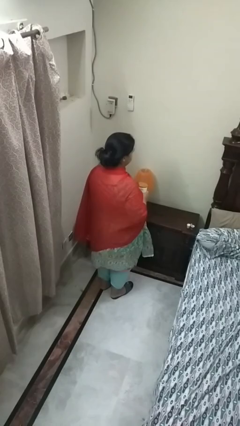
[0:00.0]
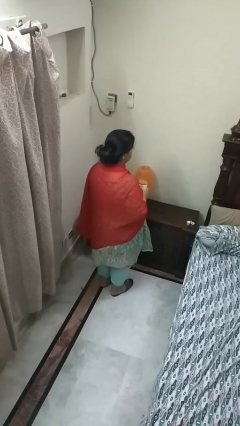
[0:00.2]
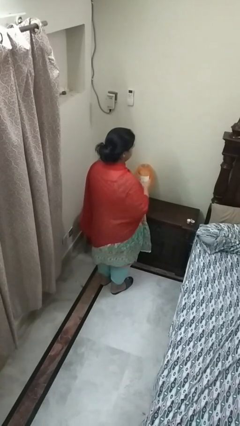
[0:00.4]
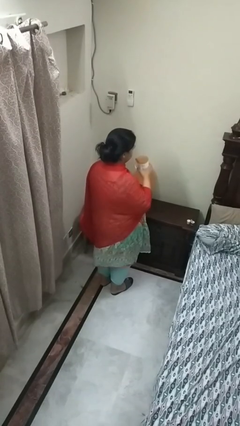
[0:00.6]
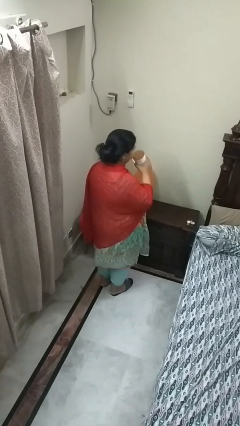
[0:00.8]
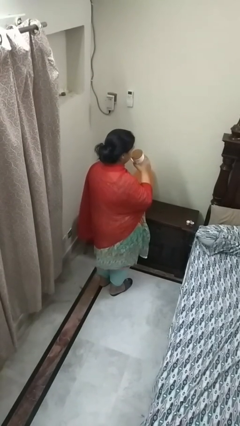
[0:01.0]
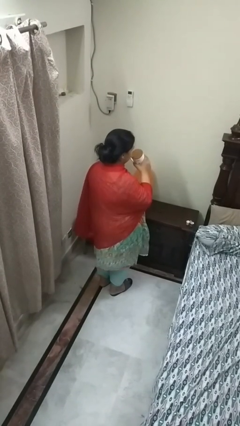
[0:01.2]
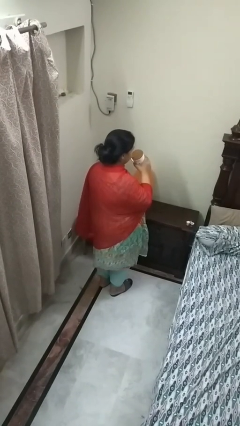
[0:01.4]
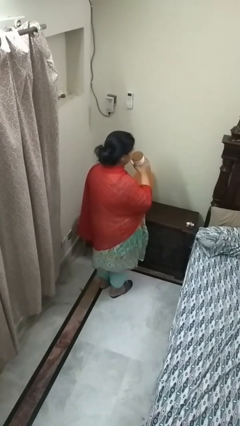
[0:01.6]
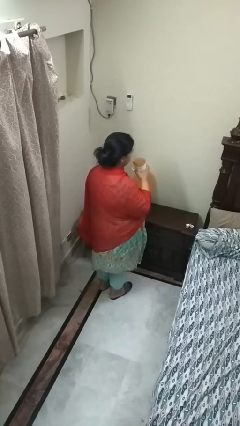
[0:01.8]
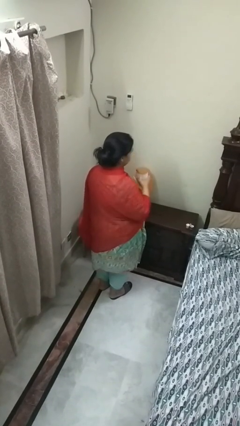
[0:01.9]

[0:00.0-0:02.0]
person drinks from straw

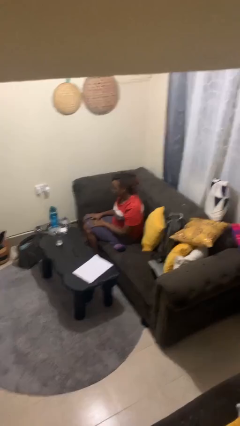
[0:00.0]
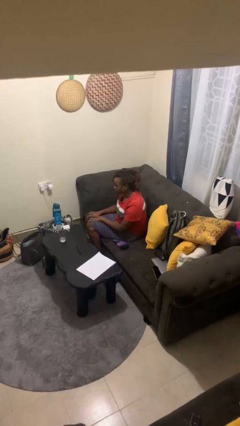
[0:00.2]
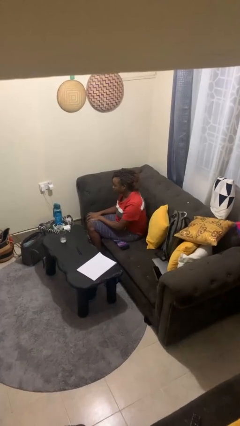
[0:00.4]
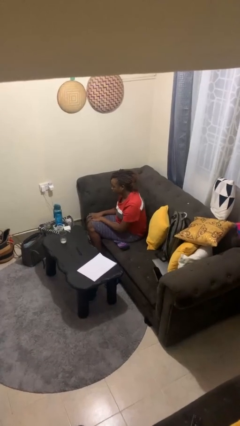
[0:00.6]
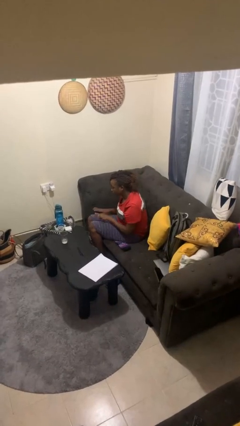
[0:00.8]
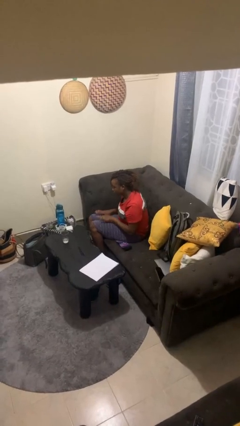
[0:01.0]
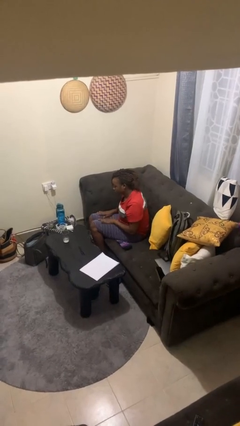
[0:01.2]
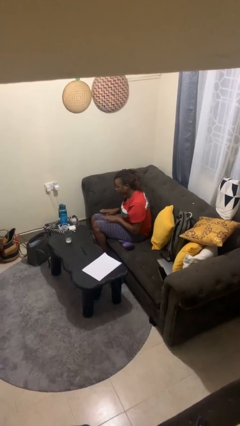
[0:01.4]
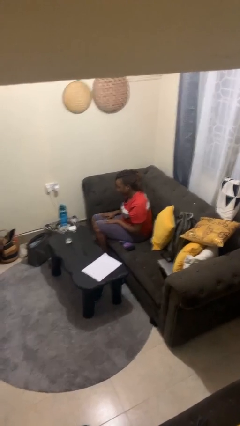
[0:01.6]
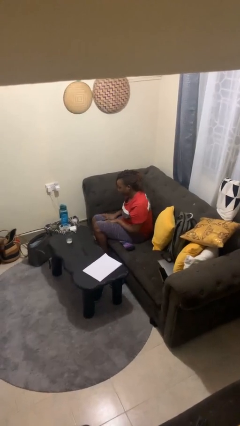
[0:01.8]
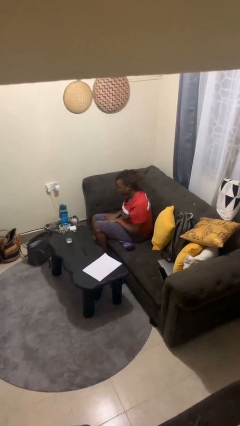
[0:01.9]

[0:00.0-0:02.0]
person slaps hands on thighs

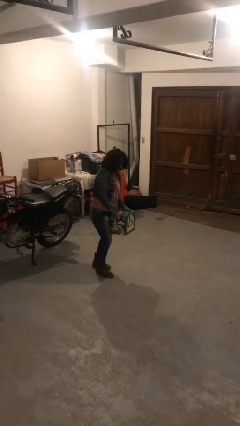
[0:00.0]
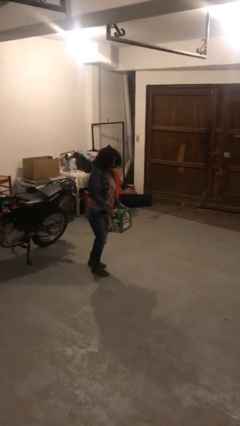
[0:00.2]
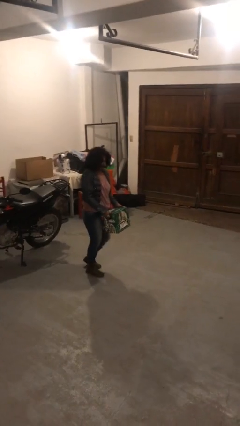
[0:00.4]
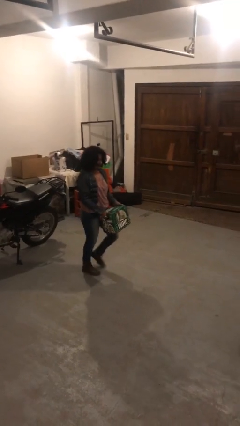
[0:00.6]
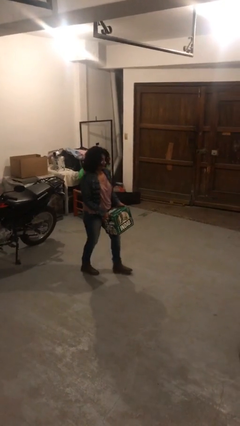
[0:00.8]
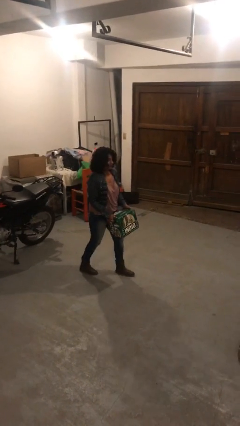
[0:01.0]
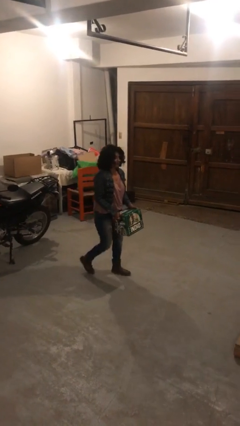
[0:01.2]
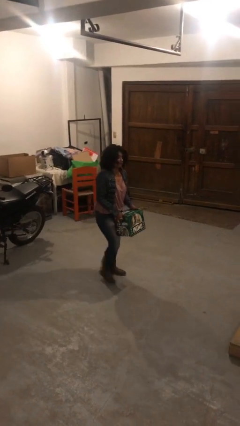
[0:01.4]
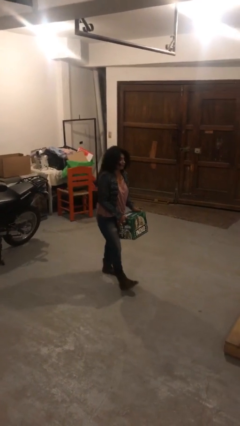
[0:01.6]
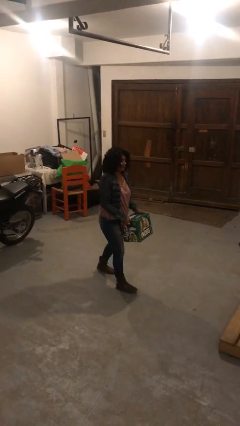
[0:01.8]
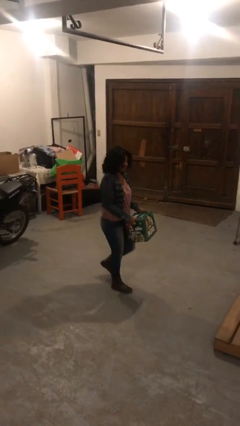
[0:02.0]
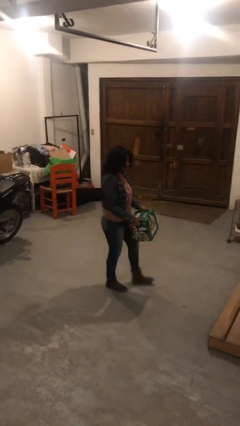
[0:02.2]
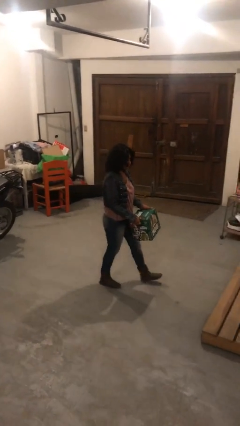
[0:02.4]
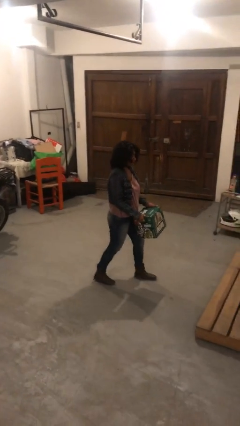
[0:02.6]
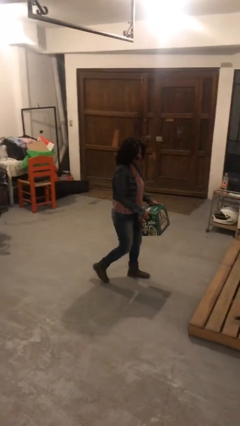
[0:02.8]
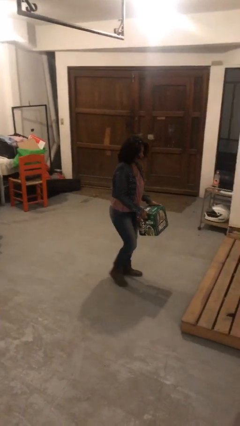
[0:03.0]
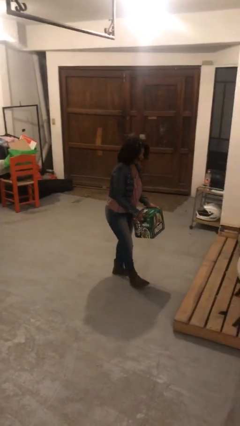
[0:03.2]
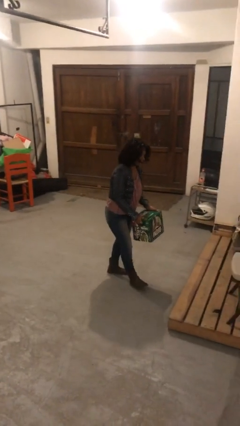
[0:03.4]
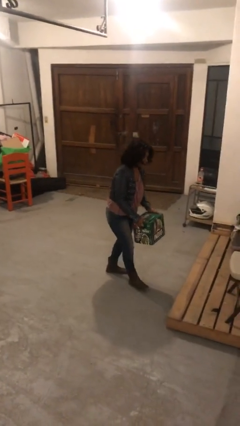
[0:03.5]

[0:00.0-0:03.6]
person carries heavy object

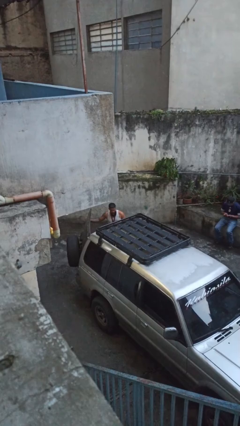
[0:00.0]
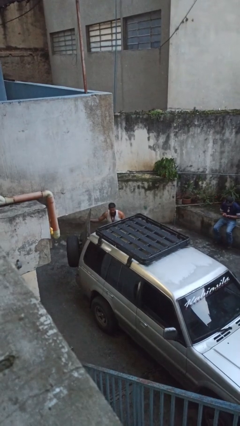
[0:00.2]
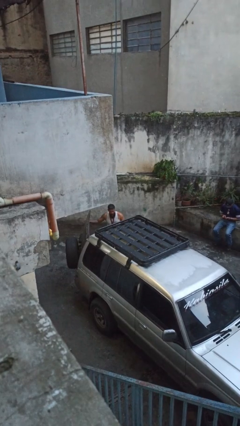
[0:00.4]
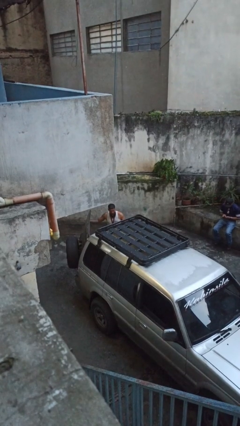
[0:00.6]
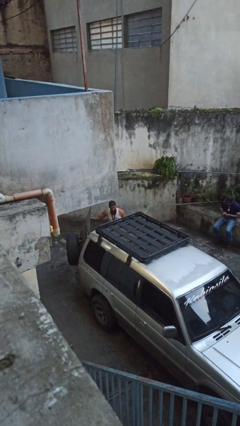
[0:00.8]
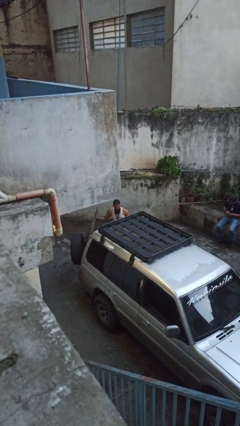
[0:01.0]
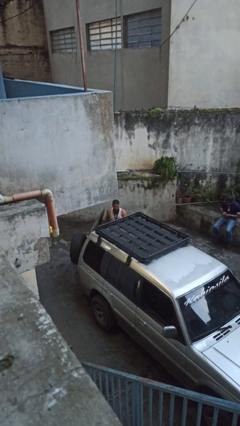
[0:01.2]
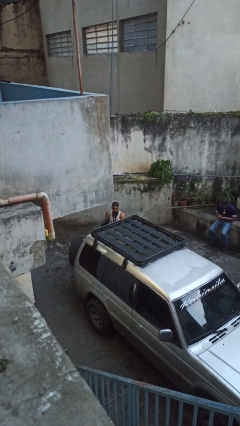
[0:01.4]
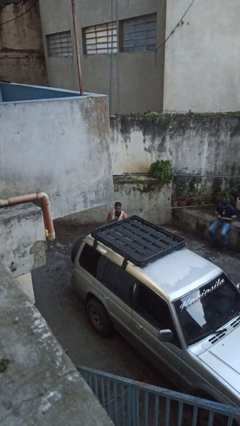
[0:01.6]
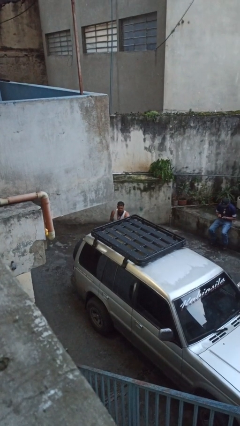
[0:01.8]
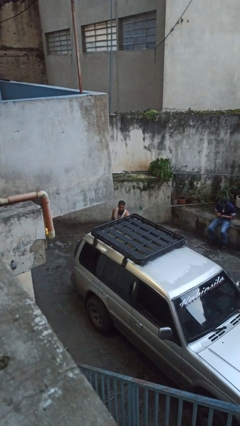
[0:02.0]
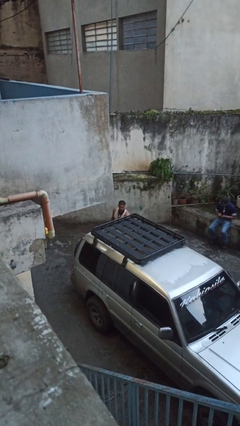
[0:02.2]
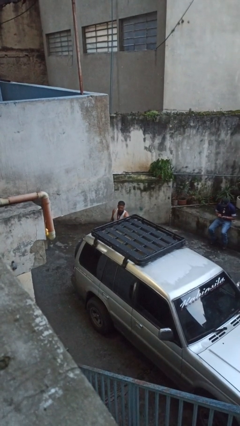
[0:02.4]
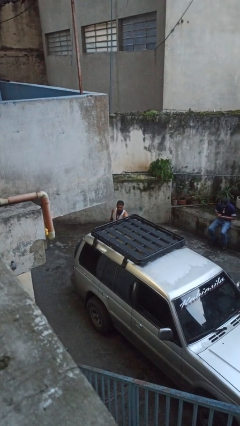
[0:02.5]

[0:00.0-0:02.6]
person closes car trunk

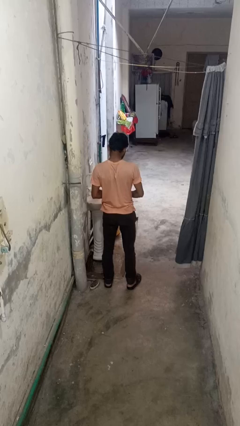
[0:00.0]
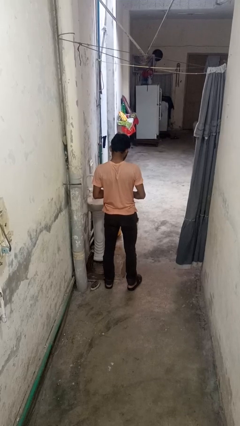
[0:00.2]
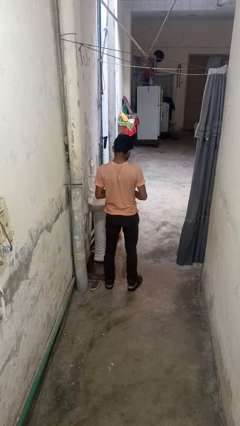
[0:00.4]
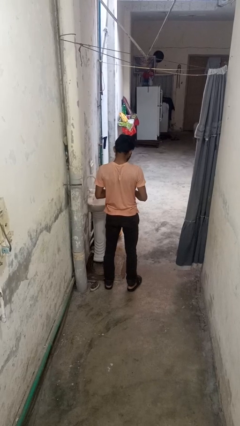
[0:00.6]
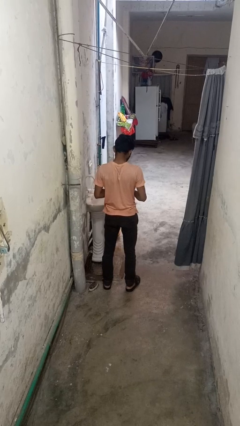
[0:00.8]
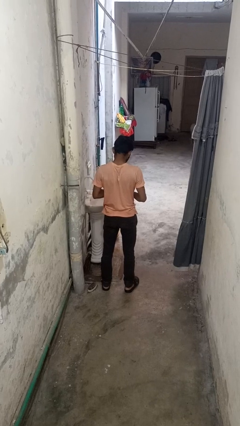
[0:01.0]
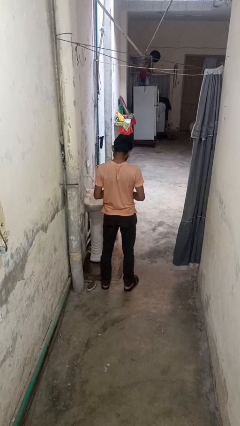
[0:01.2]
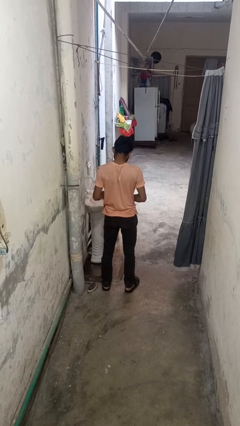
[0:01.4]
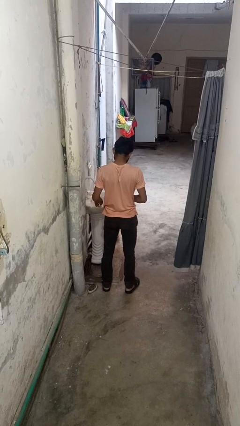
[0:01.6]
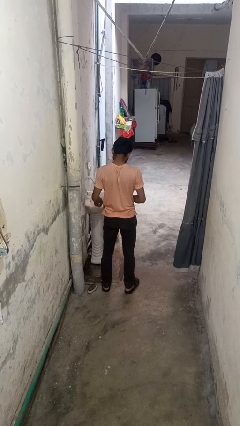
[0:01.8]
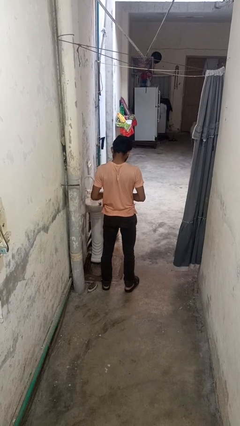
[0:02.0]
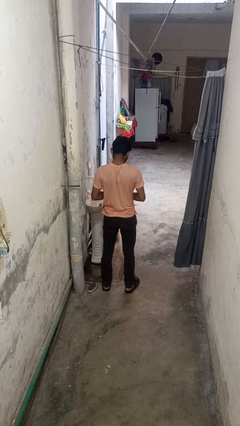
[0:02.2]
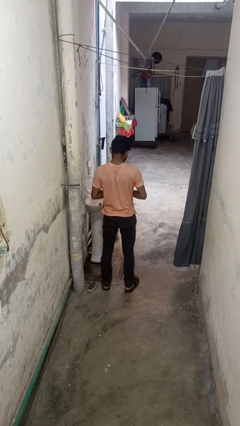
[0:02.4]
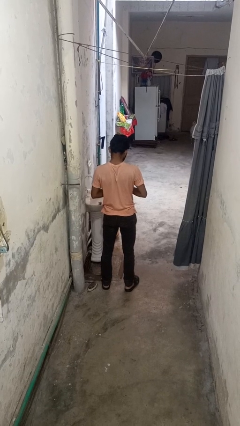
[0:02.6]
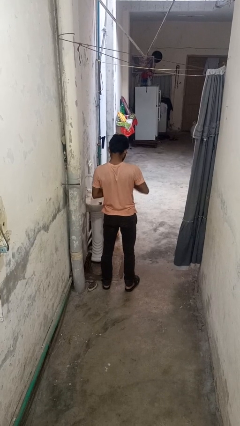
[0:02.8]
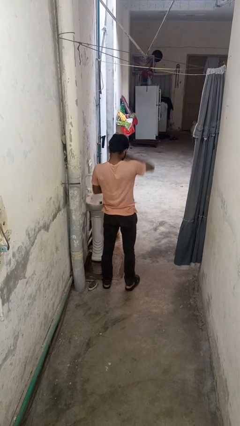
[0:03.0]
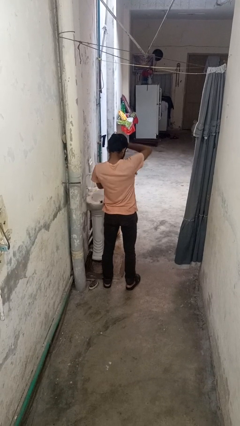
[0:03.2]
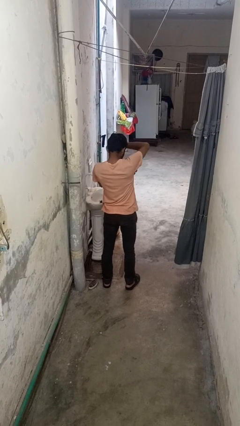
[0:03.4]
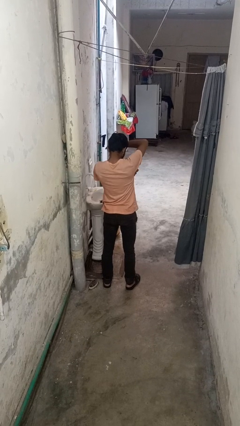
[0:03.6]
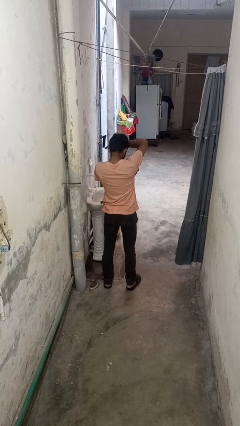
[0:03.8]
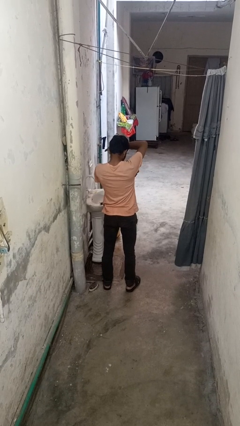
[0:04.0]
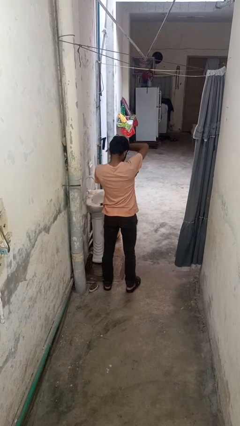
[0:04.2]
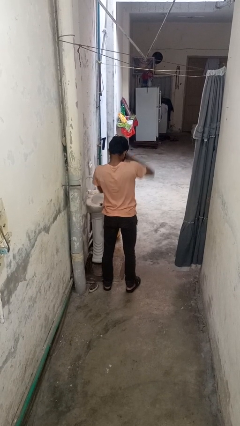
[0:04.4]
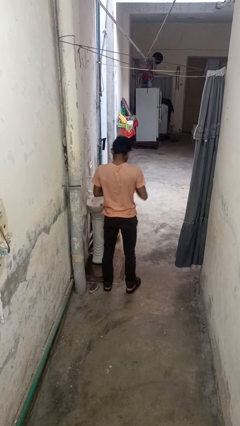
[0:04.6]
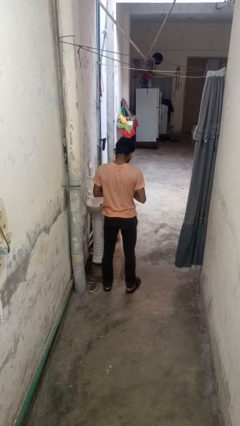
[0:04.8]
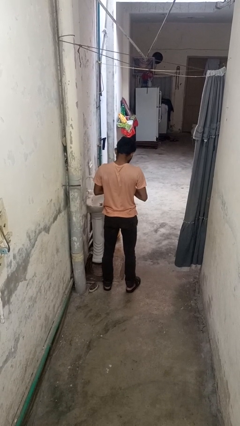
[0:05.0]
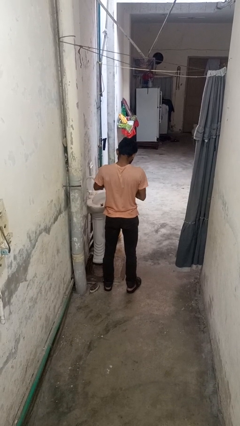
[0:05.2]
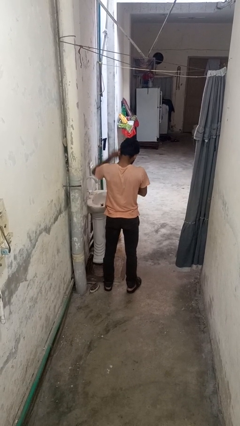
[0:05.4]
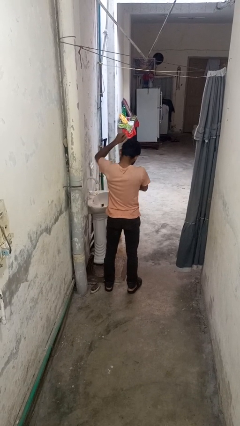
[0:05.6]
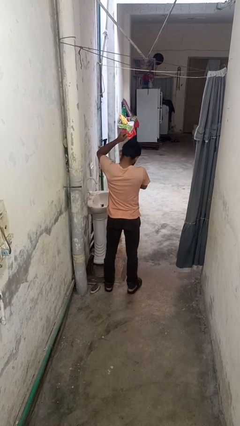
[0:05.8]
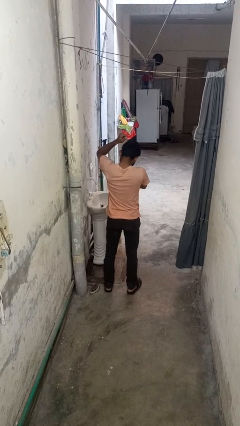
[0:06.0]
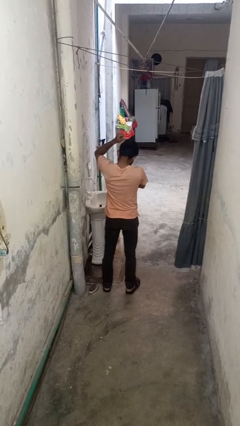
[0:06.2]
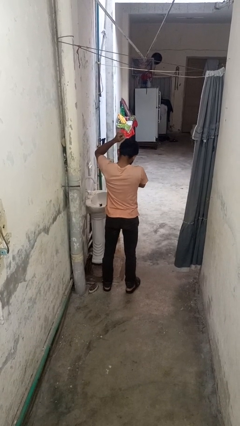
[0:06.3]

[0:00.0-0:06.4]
person applies deodorant

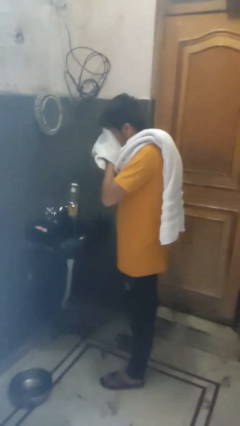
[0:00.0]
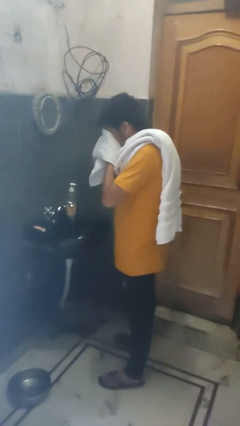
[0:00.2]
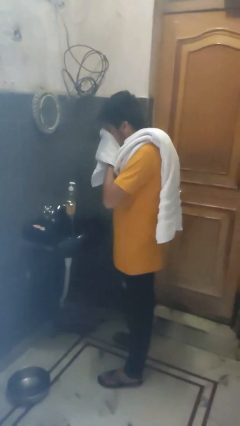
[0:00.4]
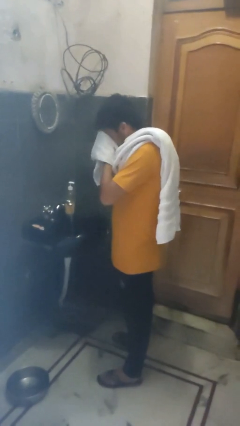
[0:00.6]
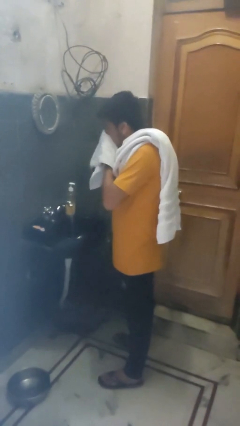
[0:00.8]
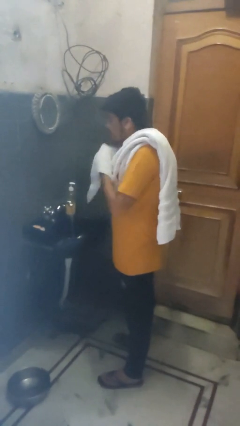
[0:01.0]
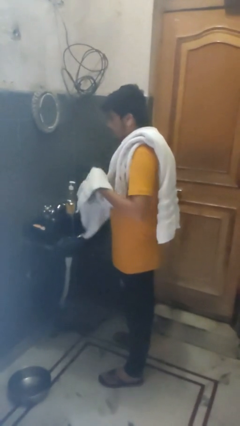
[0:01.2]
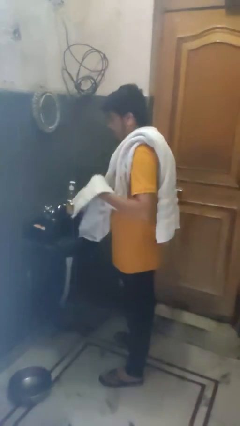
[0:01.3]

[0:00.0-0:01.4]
person dries face with towel
